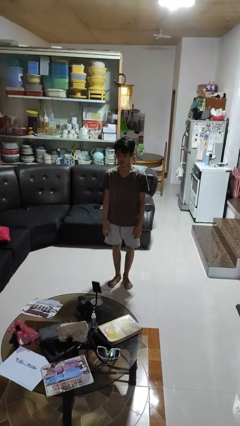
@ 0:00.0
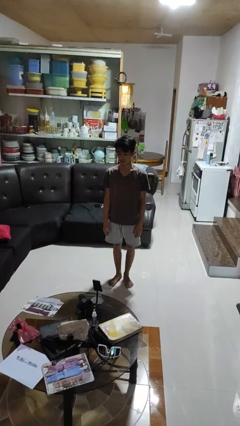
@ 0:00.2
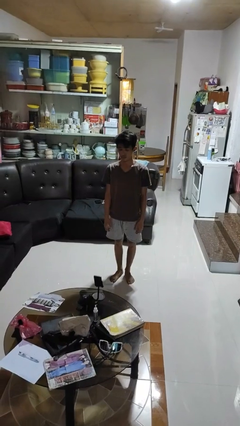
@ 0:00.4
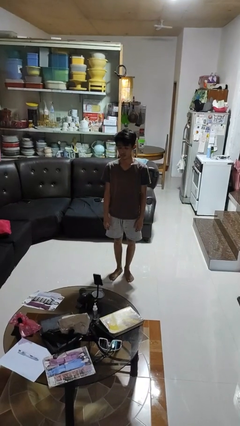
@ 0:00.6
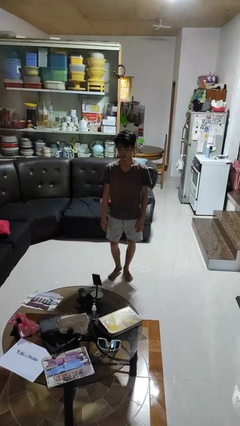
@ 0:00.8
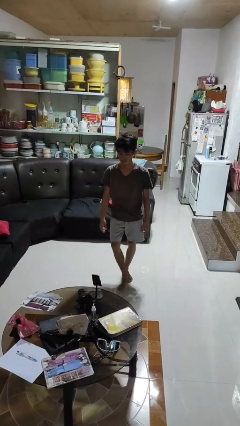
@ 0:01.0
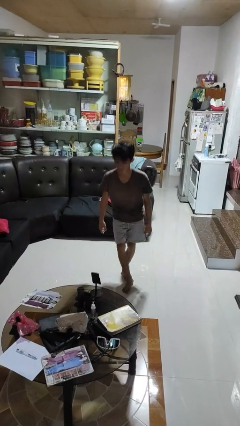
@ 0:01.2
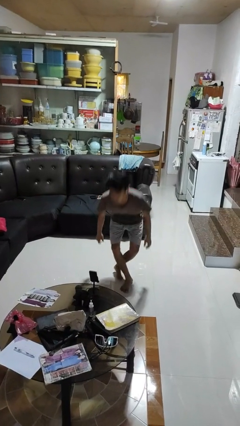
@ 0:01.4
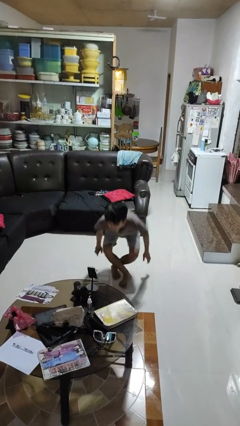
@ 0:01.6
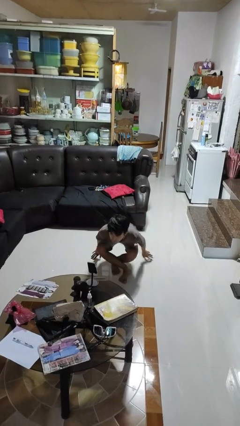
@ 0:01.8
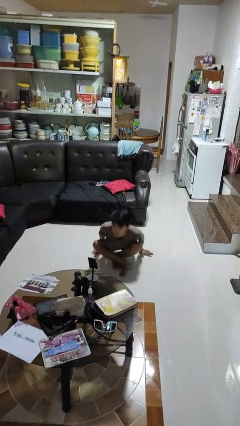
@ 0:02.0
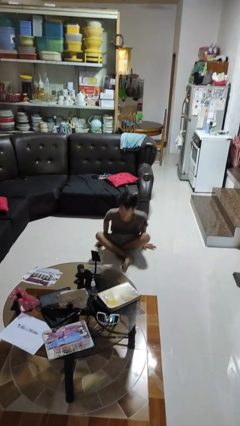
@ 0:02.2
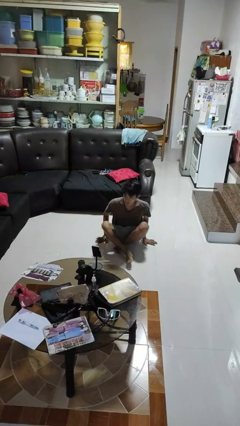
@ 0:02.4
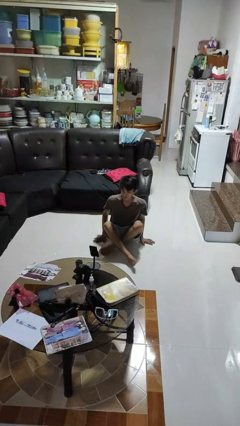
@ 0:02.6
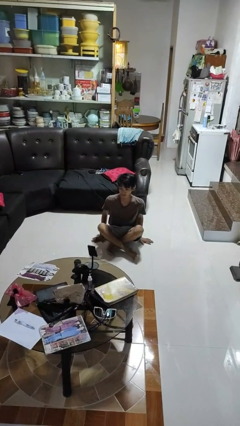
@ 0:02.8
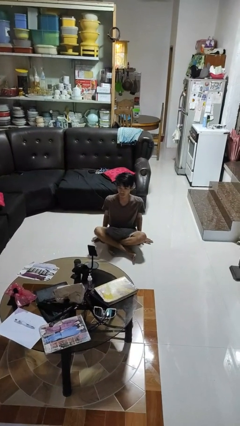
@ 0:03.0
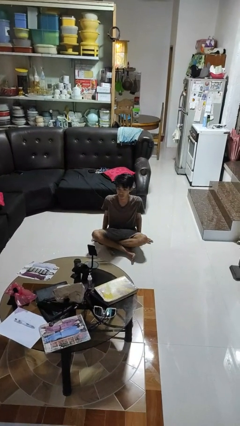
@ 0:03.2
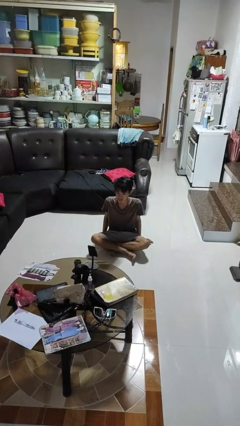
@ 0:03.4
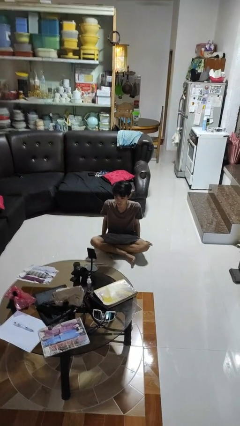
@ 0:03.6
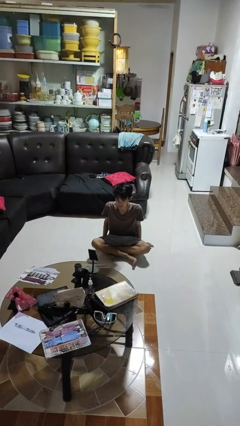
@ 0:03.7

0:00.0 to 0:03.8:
person sits crisscross

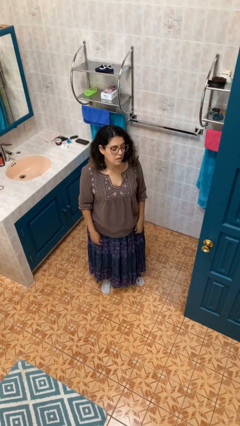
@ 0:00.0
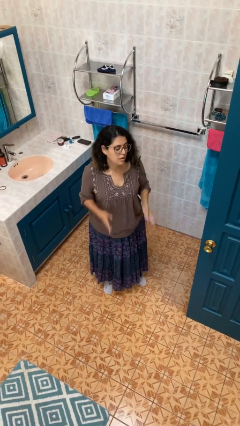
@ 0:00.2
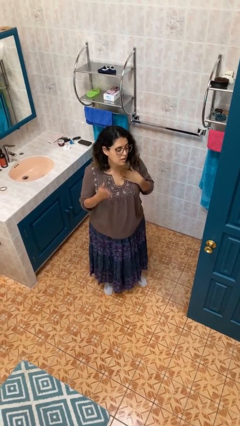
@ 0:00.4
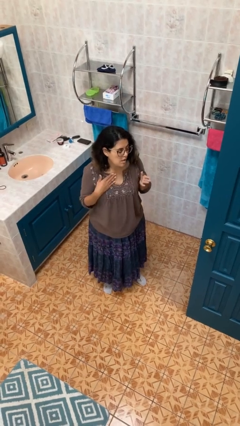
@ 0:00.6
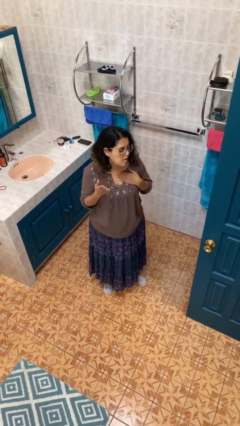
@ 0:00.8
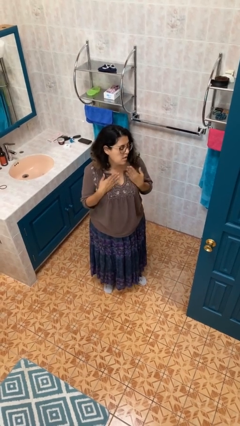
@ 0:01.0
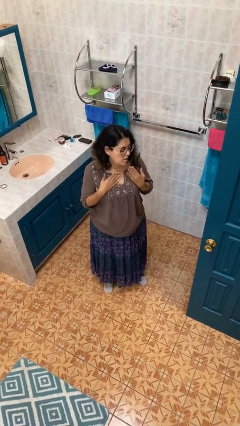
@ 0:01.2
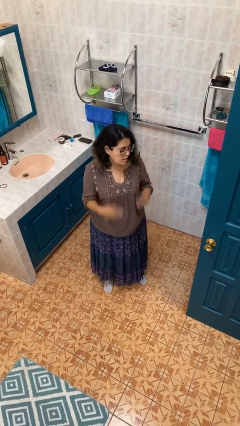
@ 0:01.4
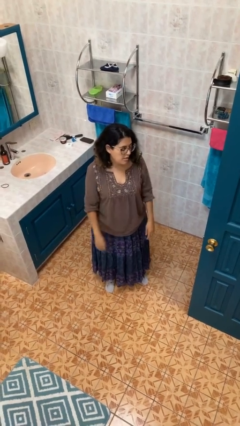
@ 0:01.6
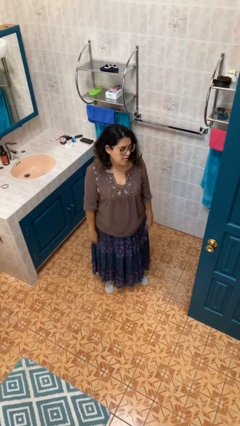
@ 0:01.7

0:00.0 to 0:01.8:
person drums on chest

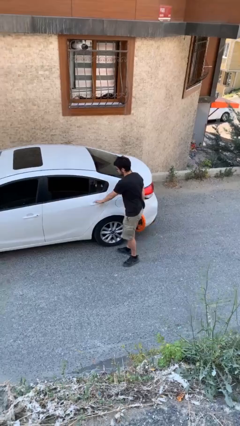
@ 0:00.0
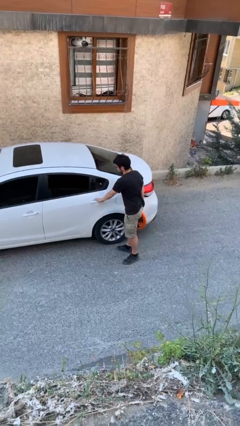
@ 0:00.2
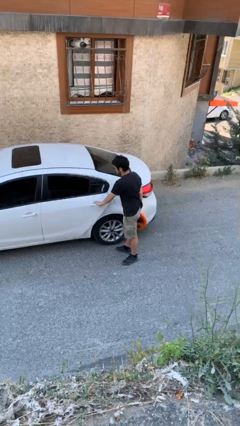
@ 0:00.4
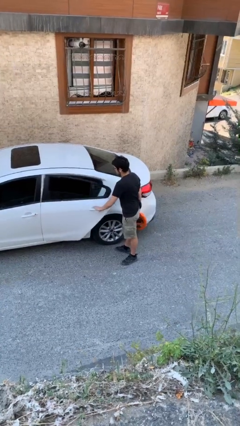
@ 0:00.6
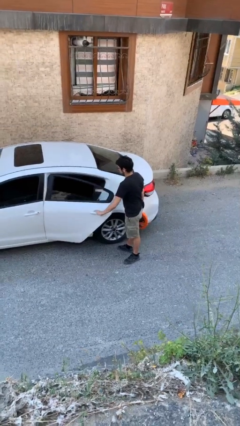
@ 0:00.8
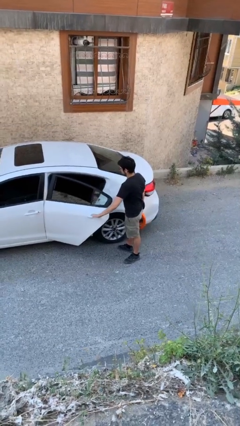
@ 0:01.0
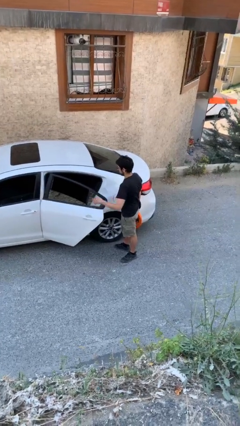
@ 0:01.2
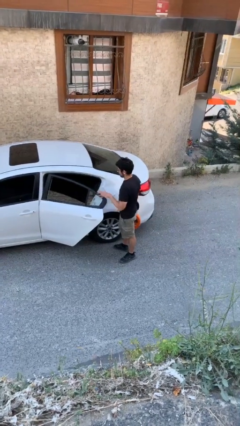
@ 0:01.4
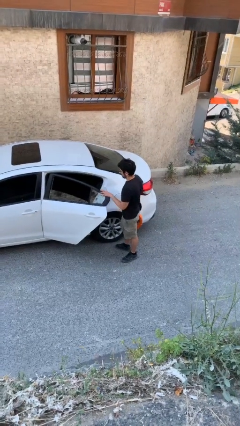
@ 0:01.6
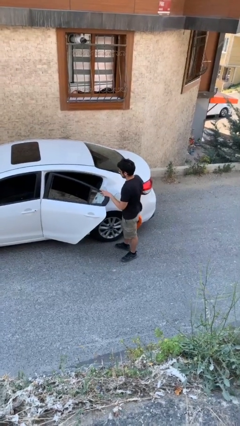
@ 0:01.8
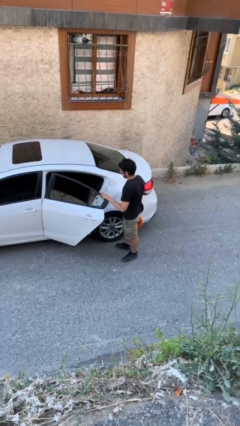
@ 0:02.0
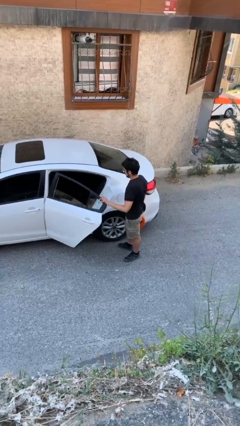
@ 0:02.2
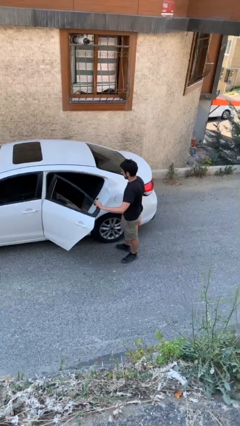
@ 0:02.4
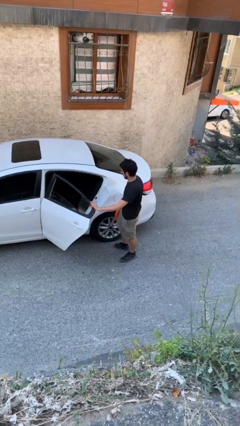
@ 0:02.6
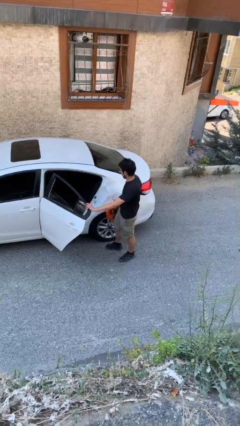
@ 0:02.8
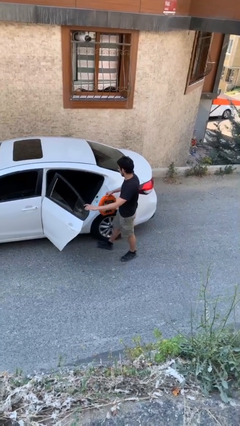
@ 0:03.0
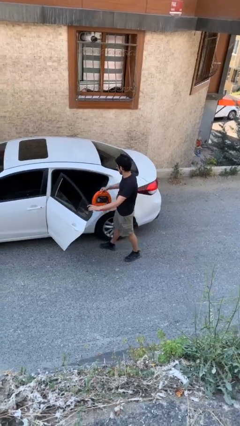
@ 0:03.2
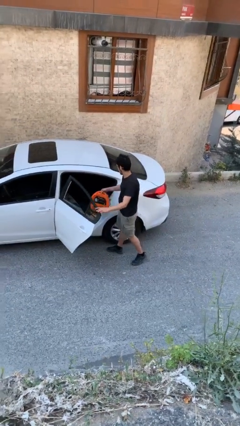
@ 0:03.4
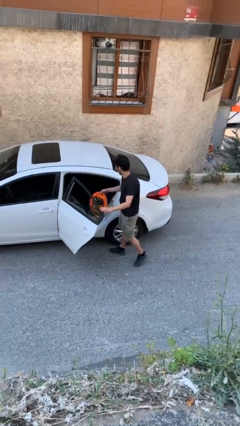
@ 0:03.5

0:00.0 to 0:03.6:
person opens car door

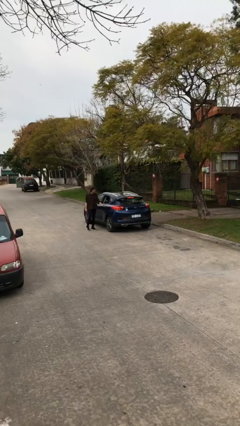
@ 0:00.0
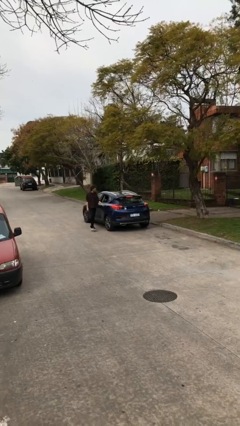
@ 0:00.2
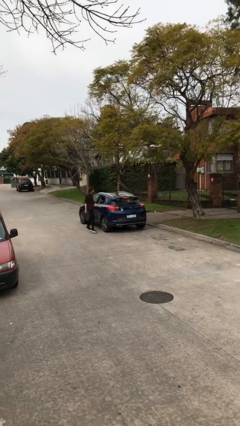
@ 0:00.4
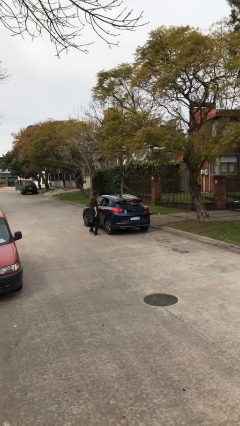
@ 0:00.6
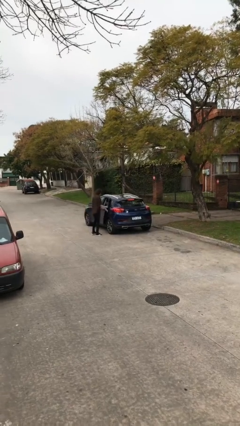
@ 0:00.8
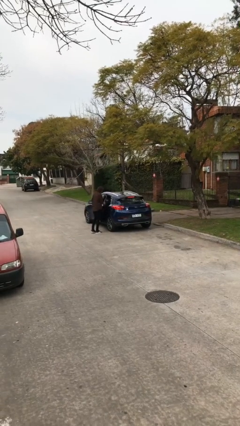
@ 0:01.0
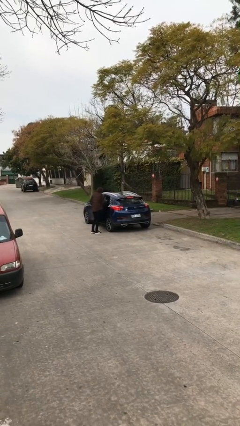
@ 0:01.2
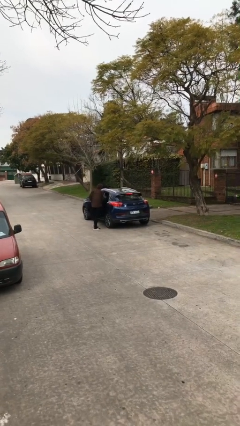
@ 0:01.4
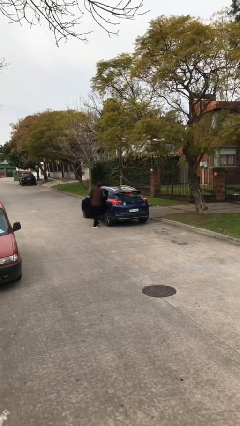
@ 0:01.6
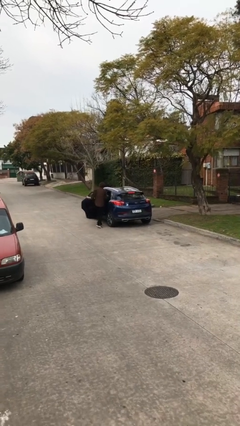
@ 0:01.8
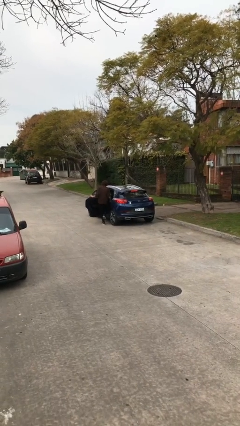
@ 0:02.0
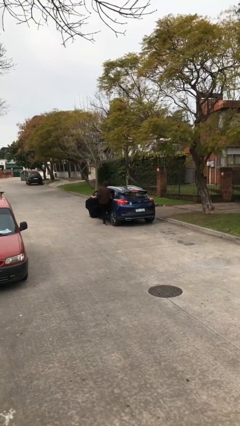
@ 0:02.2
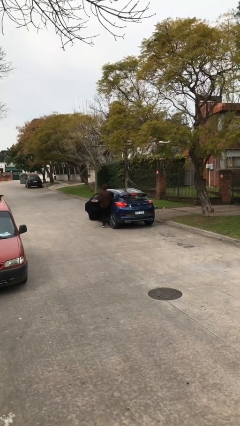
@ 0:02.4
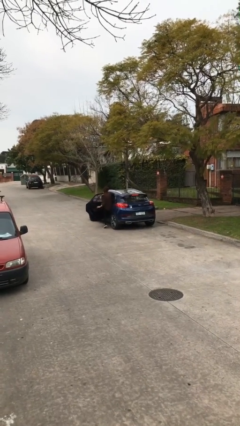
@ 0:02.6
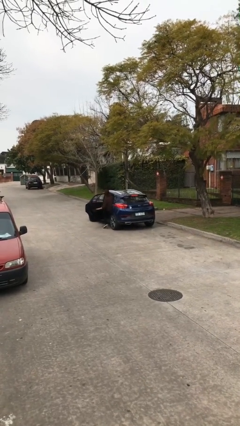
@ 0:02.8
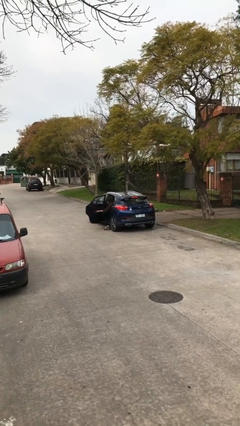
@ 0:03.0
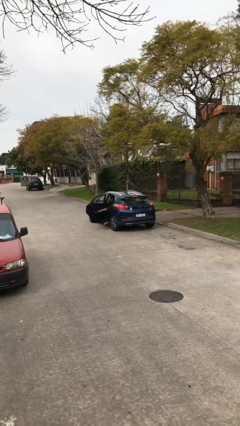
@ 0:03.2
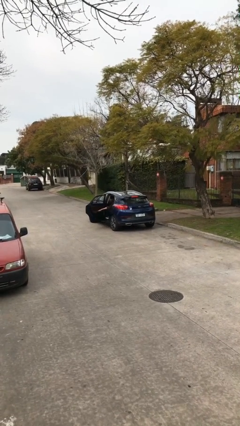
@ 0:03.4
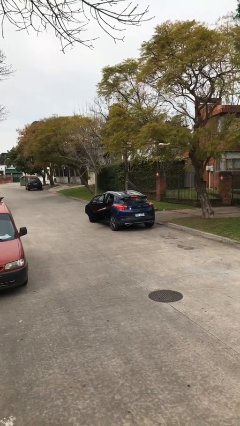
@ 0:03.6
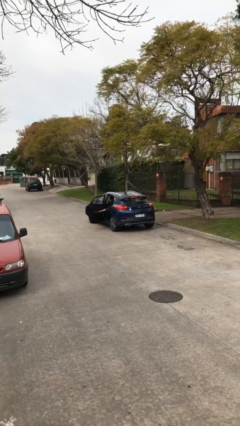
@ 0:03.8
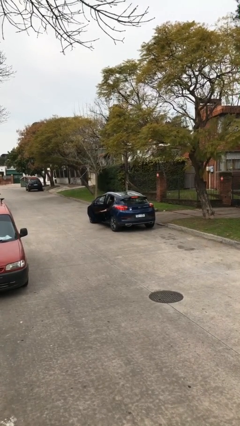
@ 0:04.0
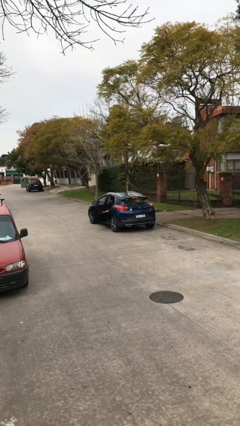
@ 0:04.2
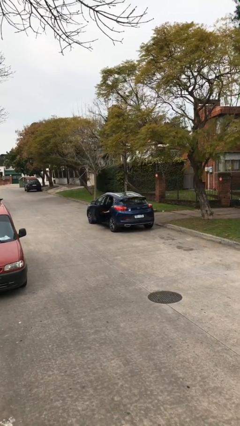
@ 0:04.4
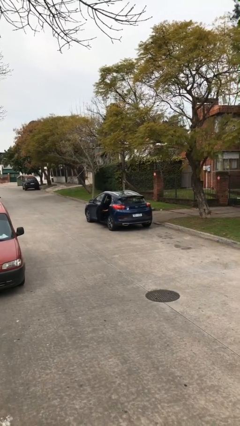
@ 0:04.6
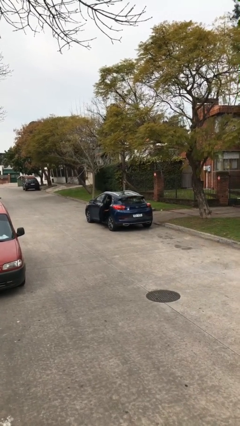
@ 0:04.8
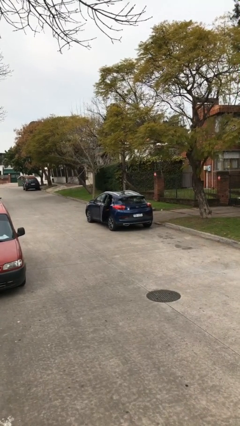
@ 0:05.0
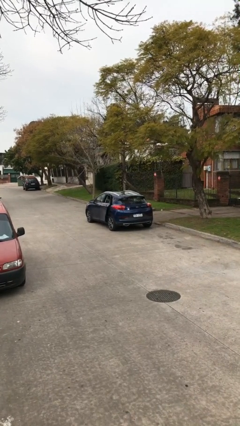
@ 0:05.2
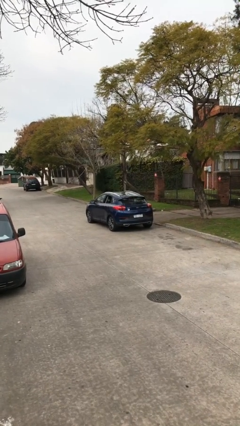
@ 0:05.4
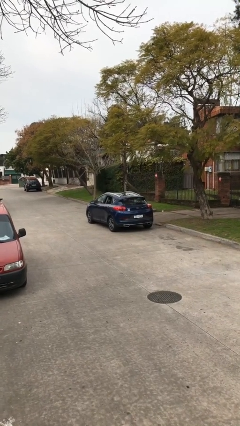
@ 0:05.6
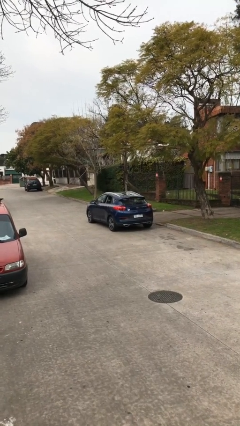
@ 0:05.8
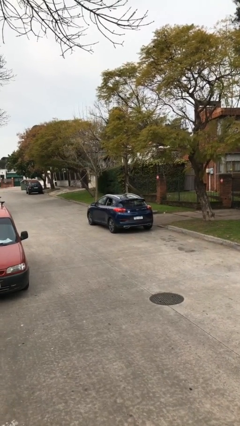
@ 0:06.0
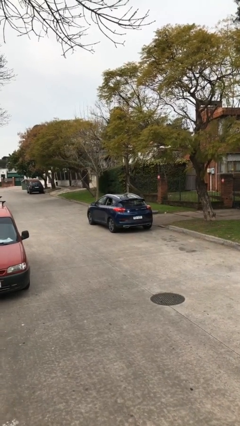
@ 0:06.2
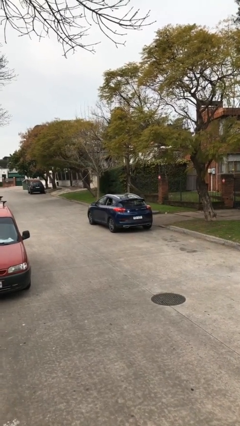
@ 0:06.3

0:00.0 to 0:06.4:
car picks up person

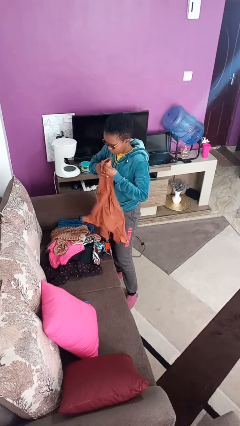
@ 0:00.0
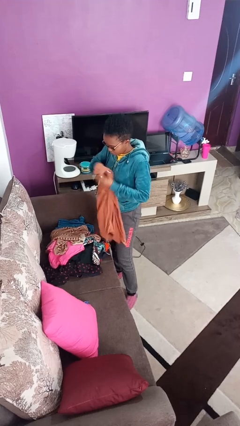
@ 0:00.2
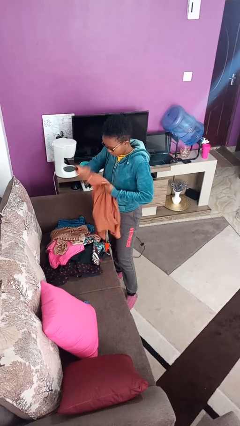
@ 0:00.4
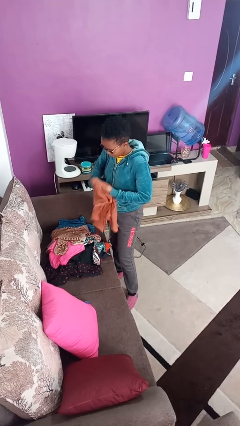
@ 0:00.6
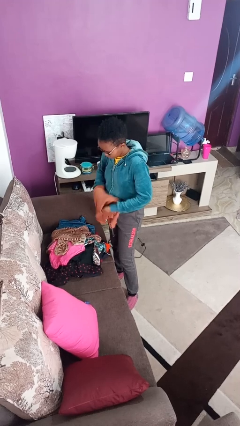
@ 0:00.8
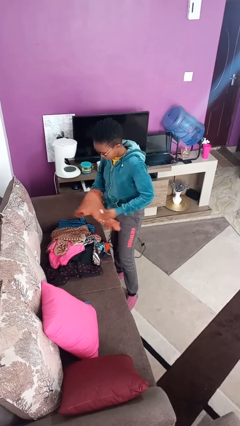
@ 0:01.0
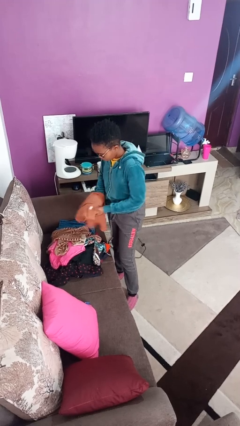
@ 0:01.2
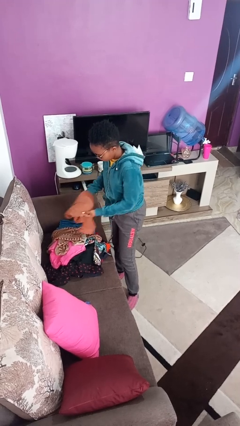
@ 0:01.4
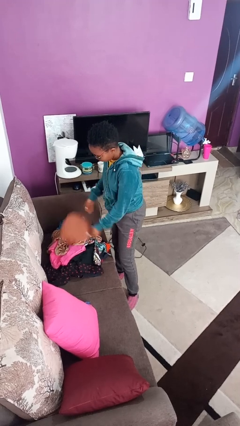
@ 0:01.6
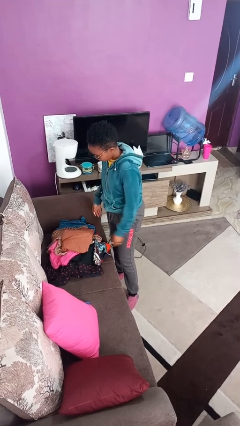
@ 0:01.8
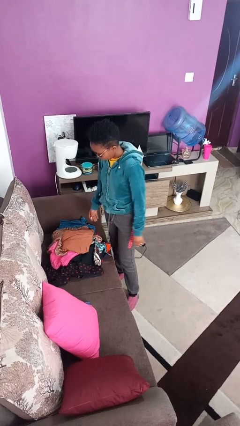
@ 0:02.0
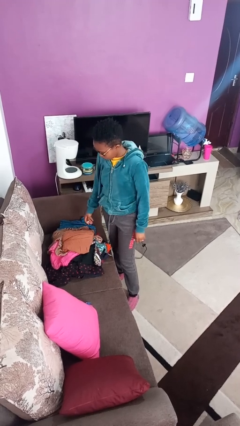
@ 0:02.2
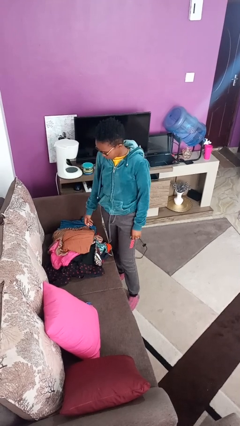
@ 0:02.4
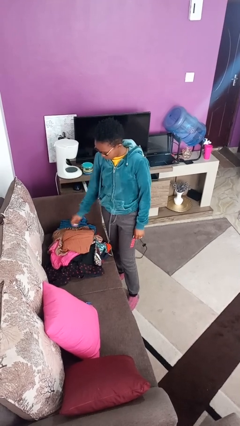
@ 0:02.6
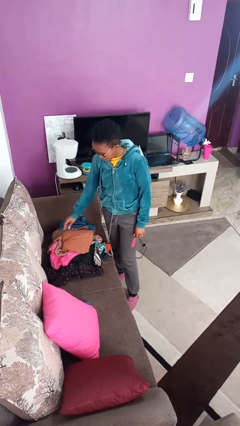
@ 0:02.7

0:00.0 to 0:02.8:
person folds shirt
